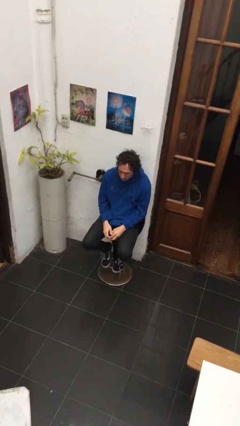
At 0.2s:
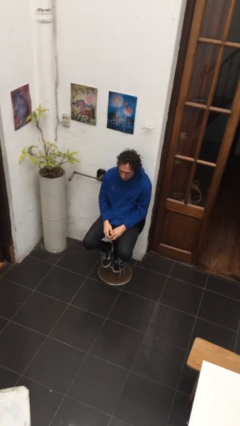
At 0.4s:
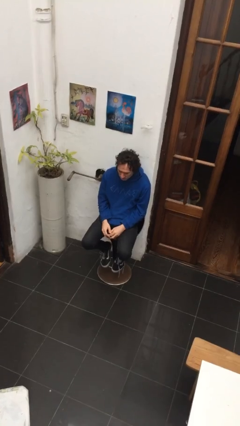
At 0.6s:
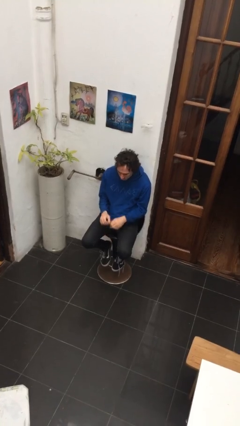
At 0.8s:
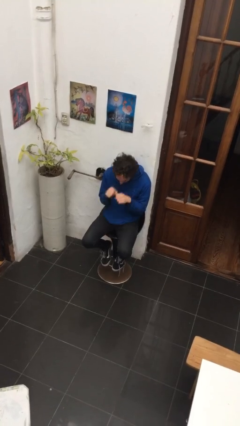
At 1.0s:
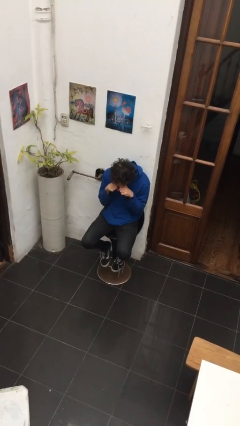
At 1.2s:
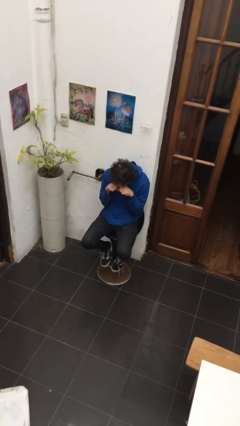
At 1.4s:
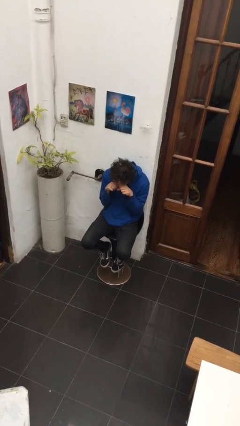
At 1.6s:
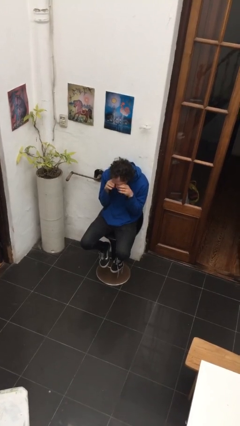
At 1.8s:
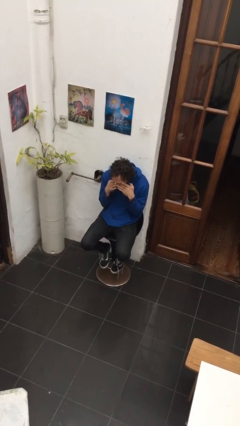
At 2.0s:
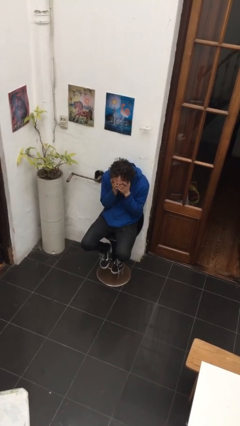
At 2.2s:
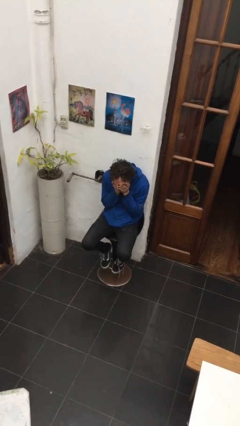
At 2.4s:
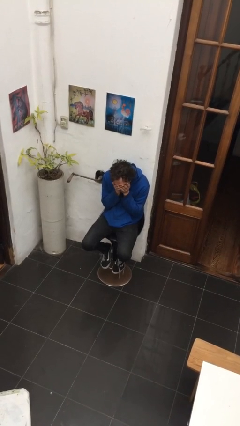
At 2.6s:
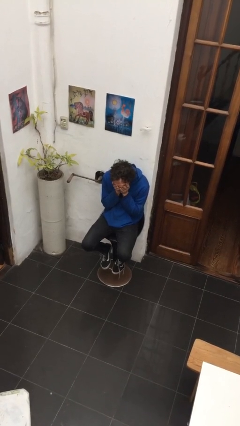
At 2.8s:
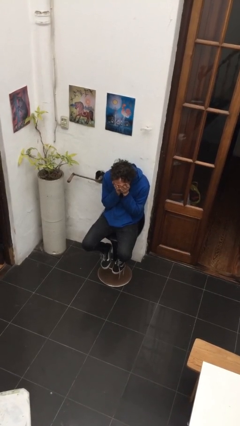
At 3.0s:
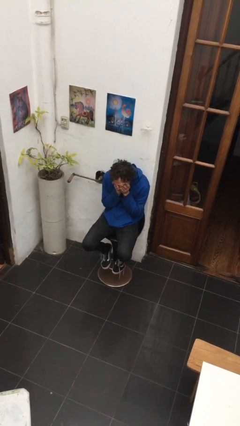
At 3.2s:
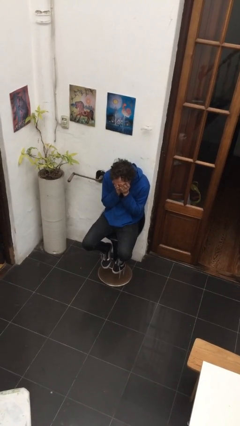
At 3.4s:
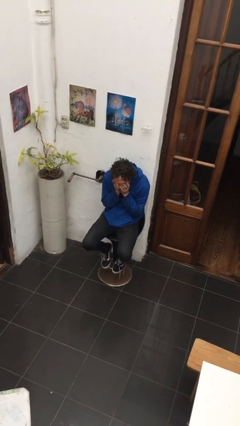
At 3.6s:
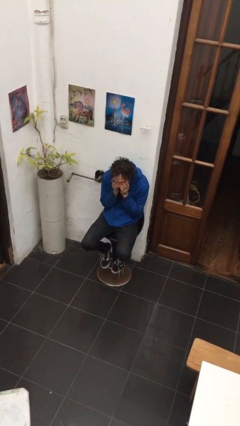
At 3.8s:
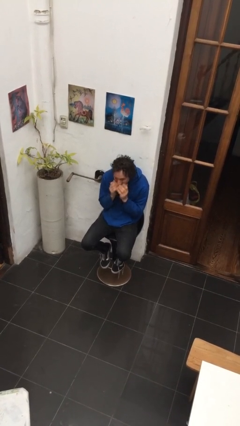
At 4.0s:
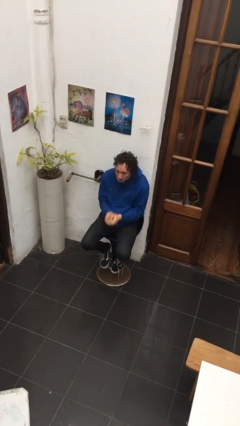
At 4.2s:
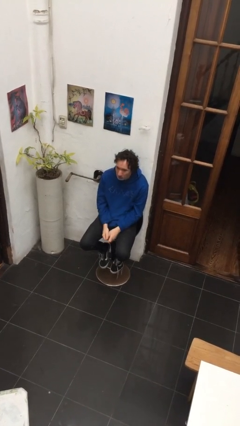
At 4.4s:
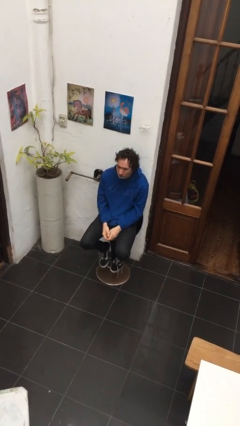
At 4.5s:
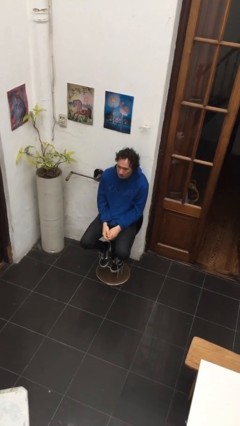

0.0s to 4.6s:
person covers face with hands

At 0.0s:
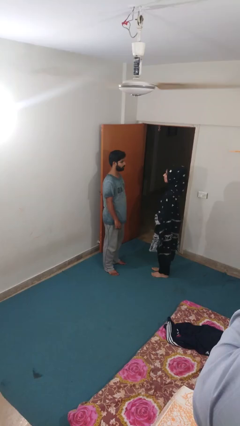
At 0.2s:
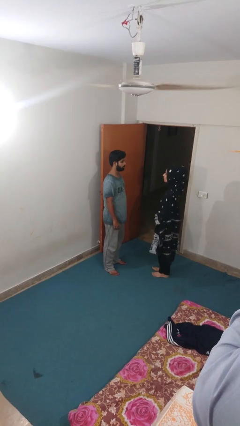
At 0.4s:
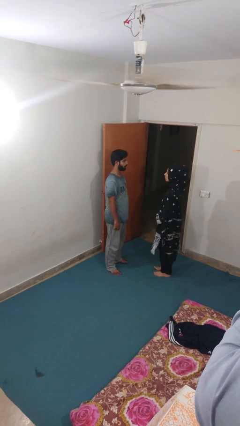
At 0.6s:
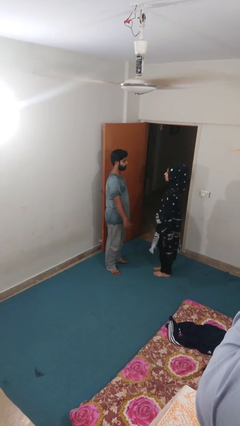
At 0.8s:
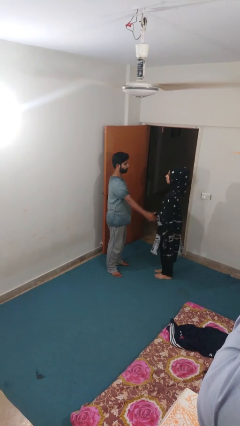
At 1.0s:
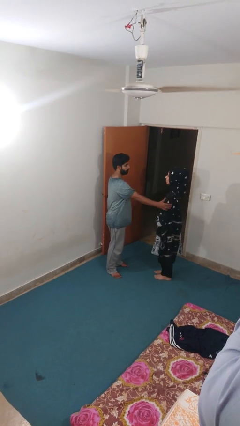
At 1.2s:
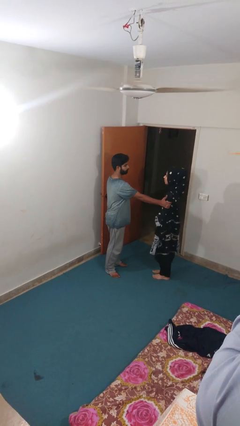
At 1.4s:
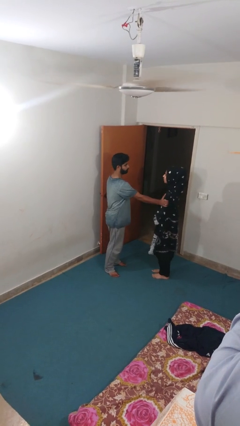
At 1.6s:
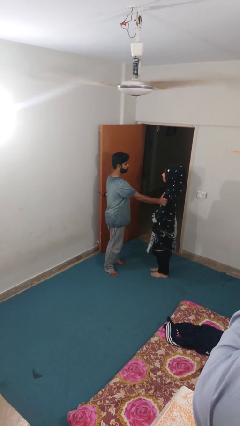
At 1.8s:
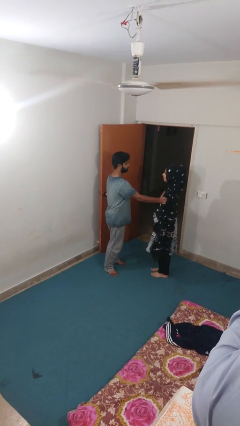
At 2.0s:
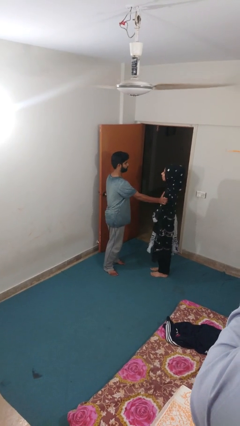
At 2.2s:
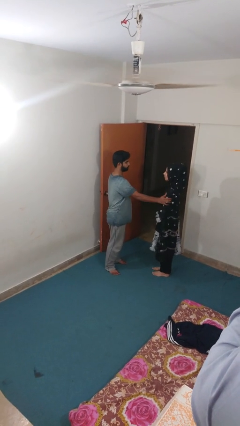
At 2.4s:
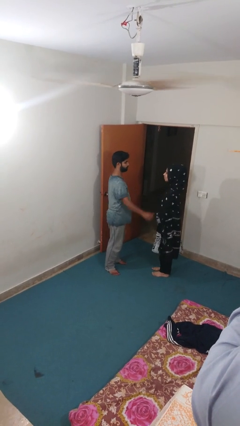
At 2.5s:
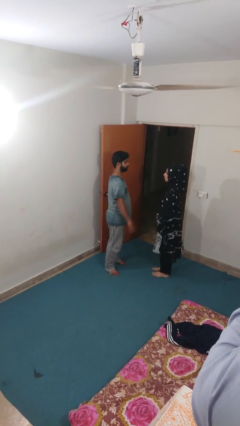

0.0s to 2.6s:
person grabs person by bicep

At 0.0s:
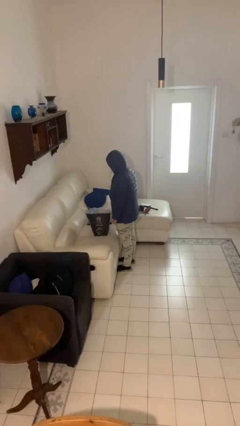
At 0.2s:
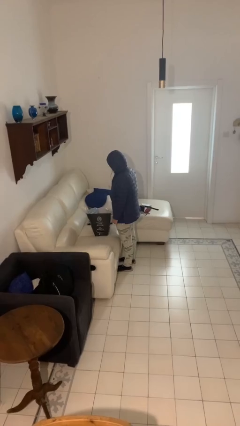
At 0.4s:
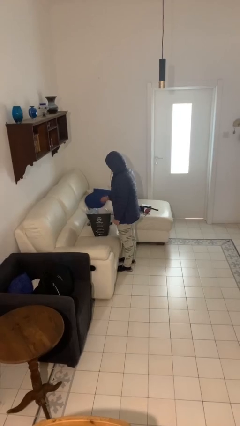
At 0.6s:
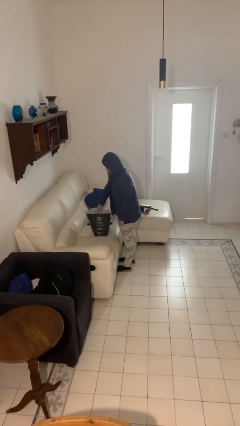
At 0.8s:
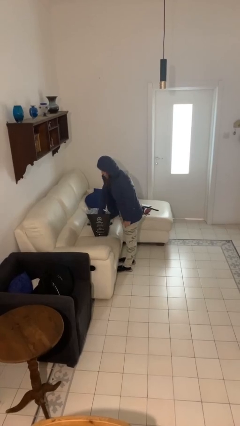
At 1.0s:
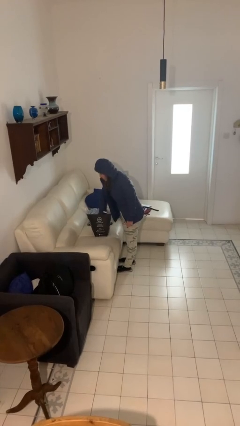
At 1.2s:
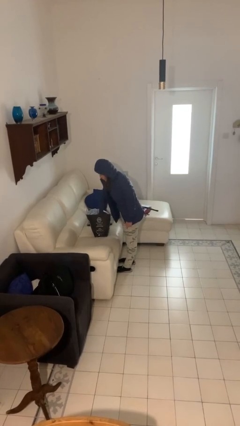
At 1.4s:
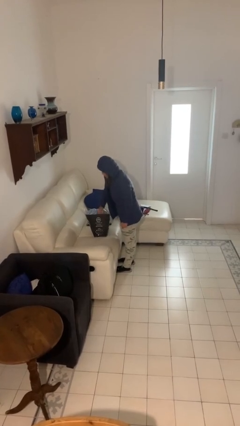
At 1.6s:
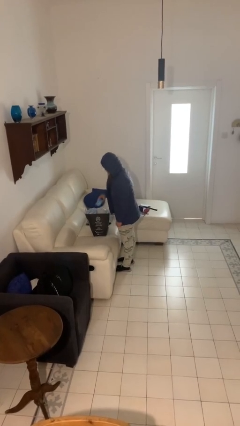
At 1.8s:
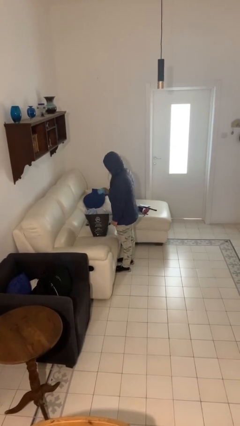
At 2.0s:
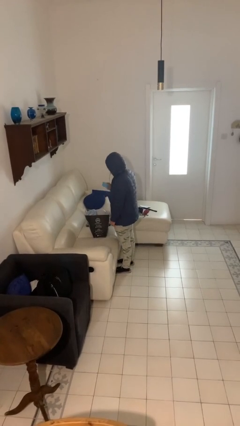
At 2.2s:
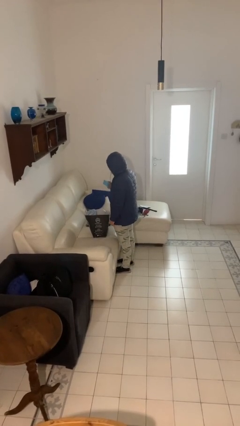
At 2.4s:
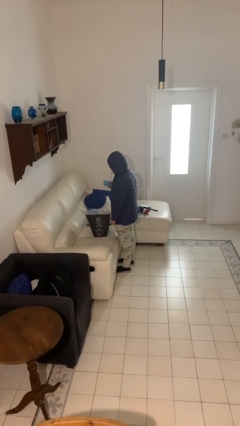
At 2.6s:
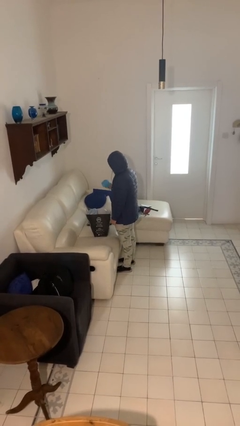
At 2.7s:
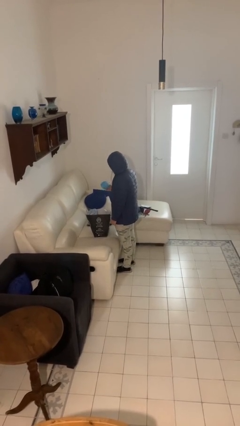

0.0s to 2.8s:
person takes object from bag

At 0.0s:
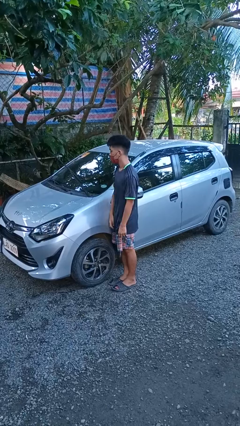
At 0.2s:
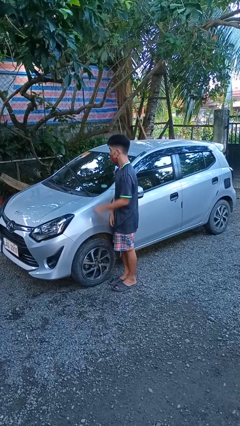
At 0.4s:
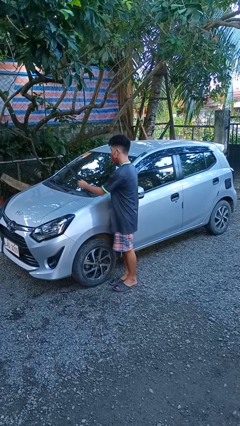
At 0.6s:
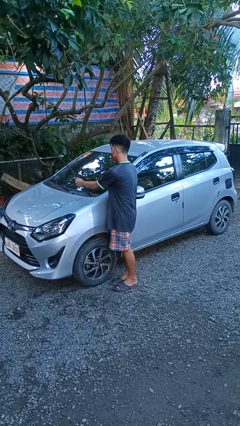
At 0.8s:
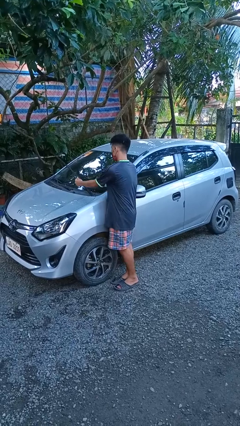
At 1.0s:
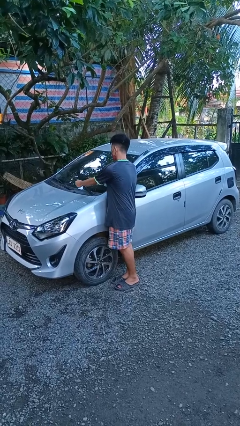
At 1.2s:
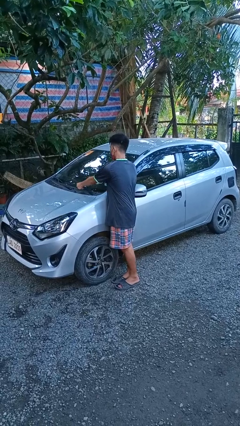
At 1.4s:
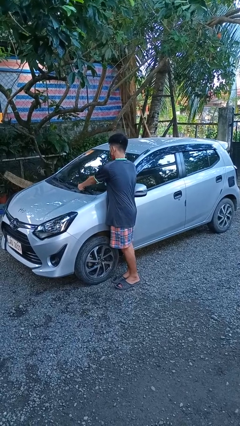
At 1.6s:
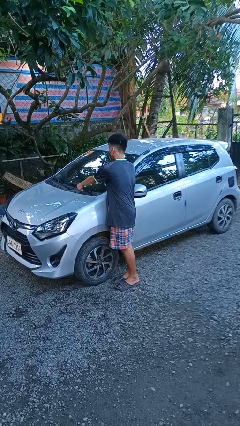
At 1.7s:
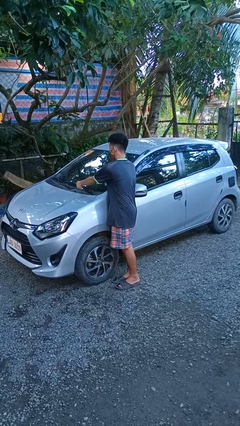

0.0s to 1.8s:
person flips down car wipers

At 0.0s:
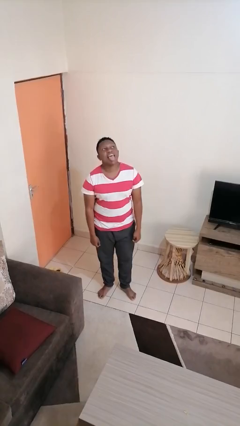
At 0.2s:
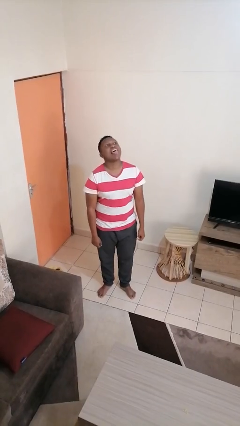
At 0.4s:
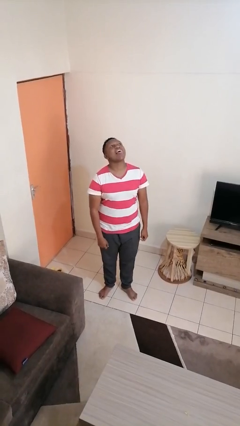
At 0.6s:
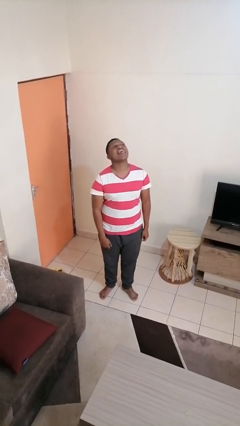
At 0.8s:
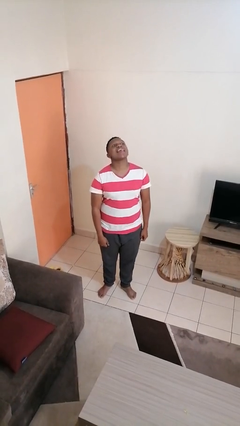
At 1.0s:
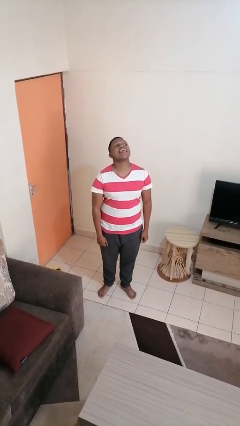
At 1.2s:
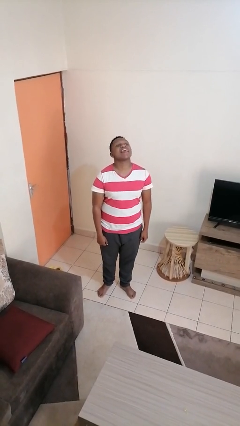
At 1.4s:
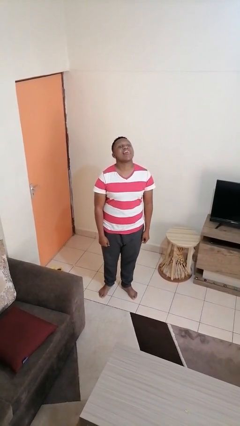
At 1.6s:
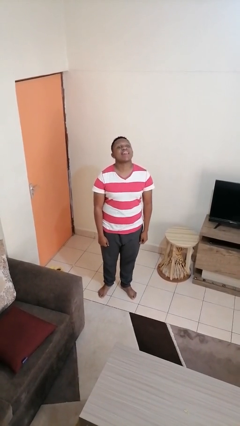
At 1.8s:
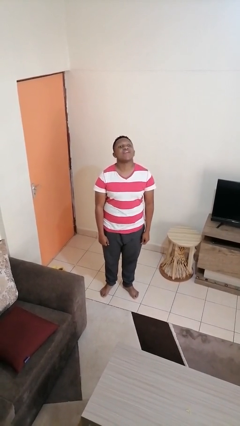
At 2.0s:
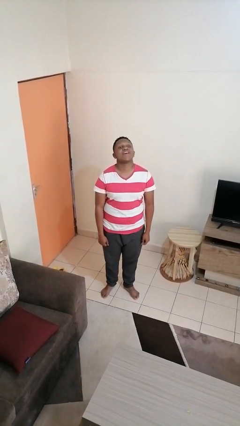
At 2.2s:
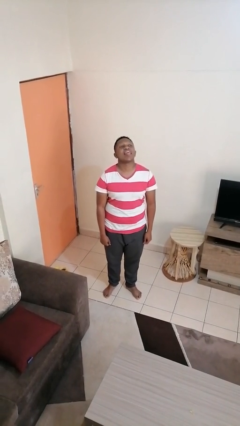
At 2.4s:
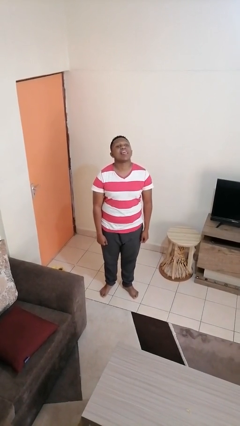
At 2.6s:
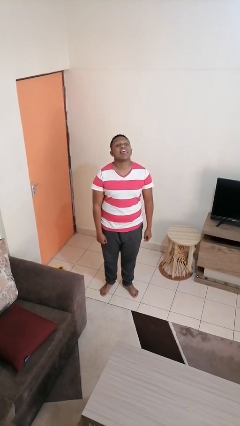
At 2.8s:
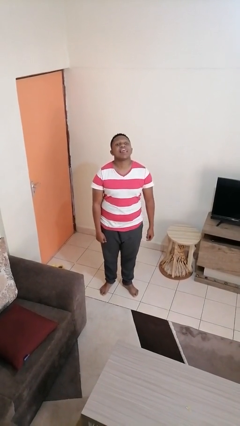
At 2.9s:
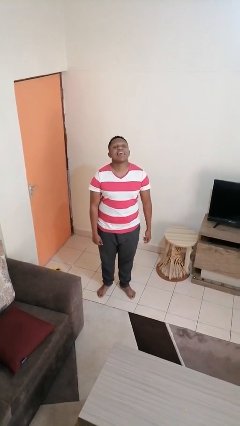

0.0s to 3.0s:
person sticks out tongue

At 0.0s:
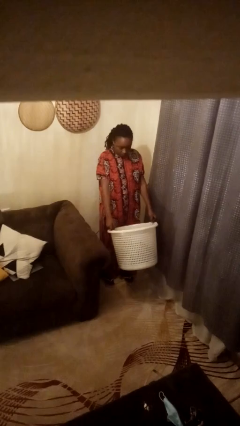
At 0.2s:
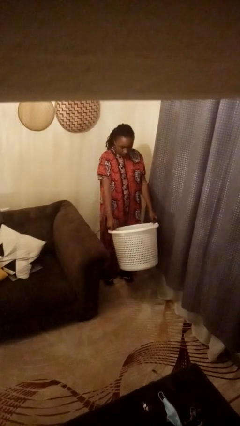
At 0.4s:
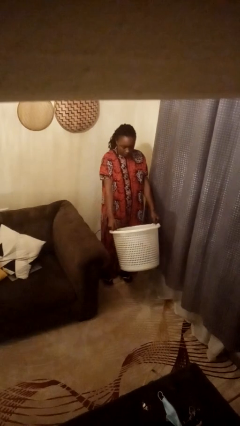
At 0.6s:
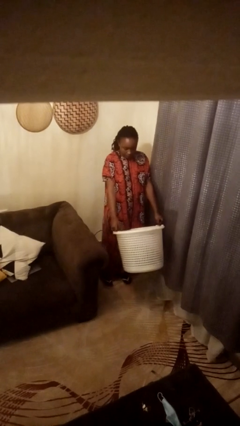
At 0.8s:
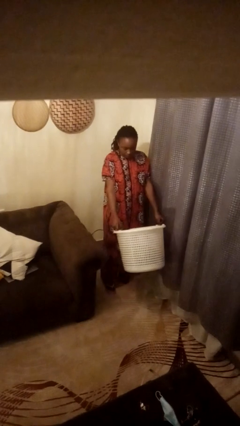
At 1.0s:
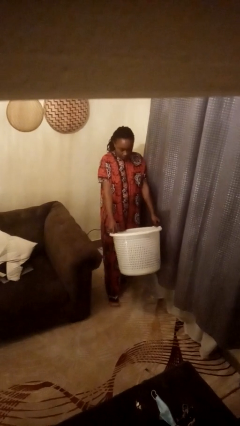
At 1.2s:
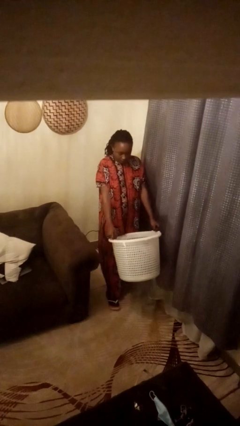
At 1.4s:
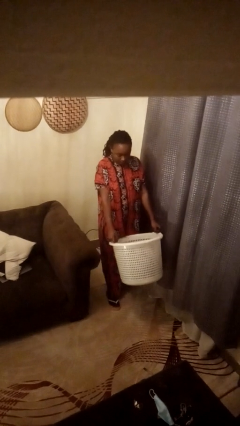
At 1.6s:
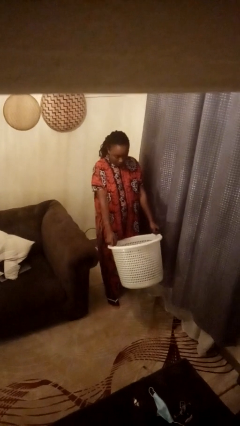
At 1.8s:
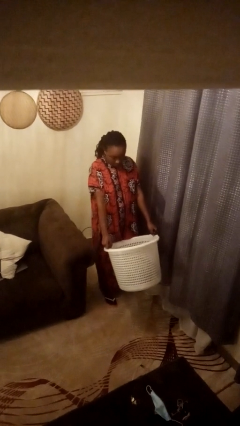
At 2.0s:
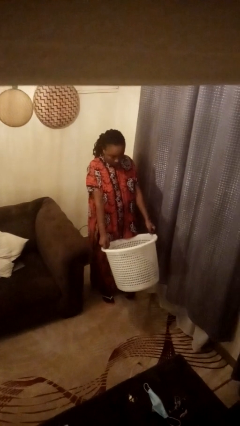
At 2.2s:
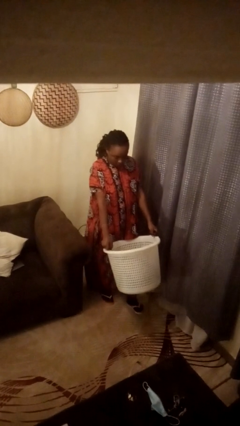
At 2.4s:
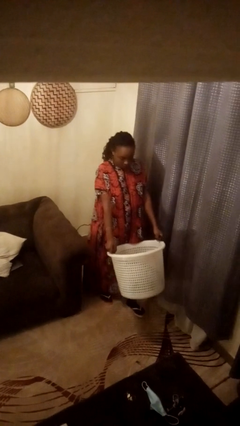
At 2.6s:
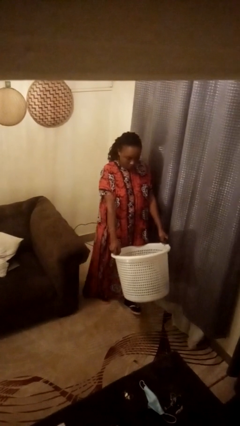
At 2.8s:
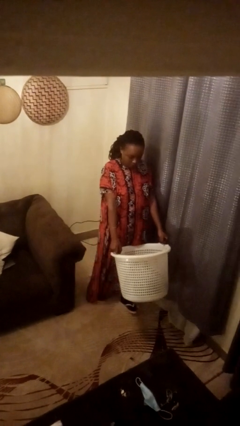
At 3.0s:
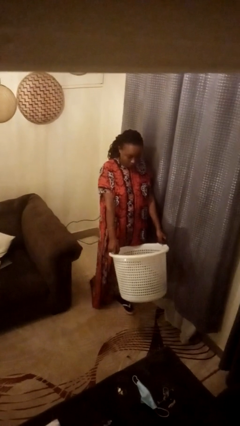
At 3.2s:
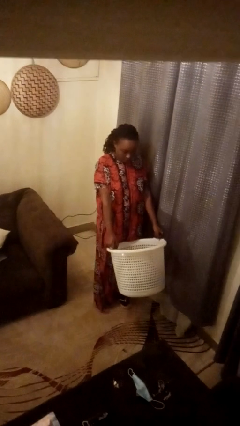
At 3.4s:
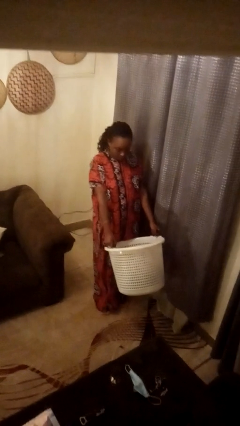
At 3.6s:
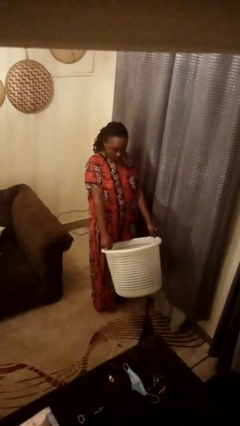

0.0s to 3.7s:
person carries laundry basket
